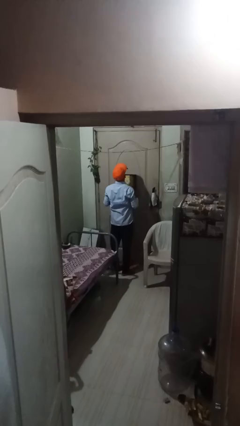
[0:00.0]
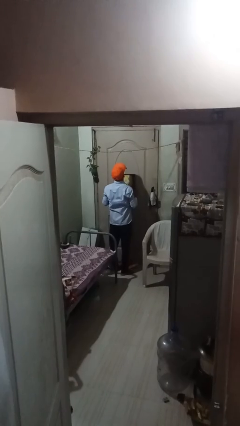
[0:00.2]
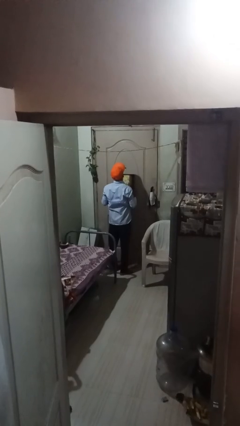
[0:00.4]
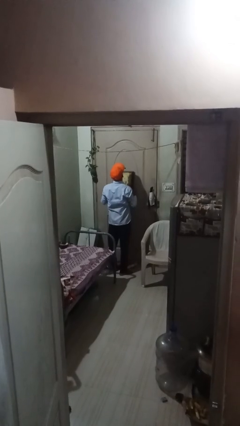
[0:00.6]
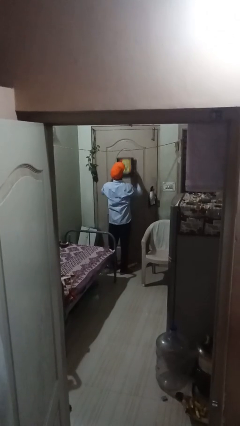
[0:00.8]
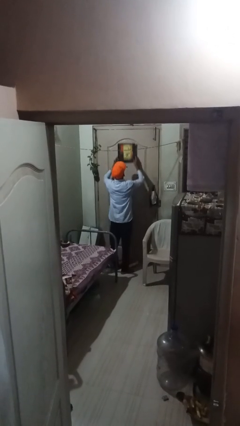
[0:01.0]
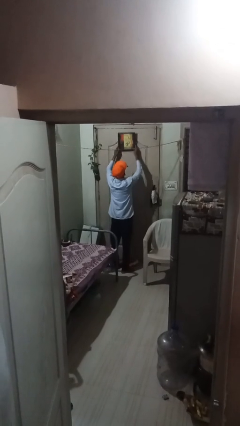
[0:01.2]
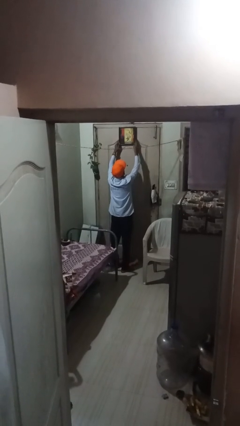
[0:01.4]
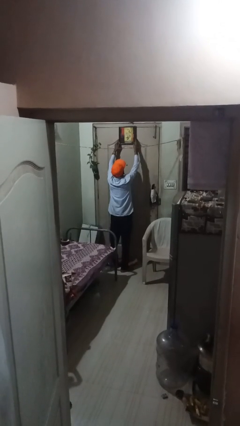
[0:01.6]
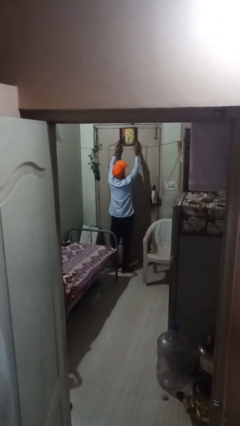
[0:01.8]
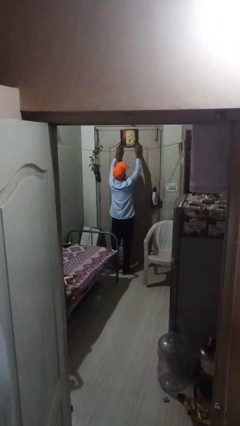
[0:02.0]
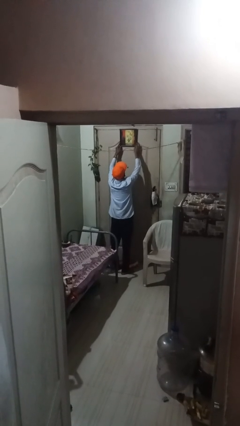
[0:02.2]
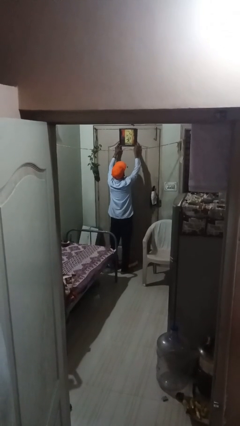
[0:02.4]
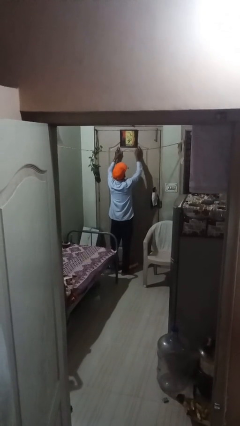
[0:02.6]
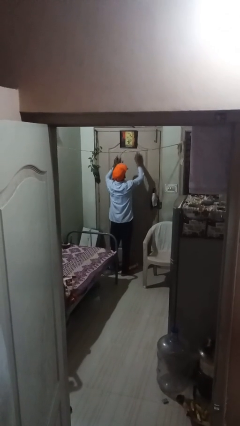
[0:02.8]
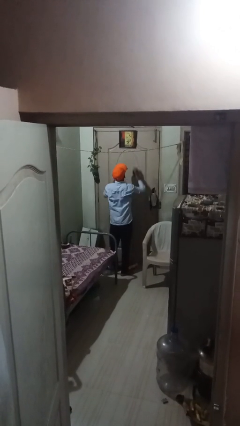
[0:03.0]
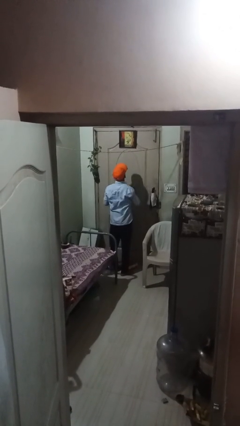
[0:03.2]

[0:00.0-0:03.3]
person puts up picture frame

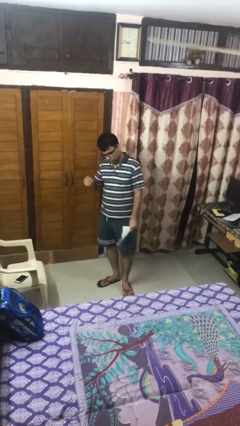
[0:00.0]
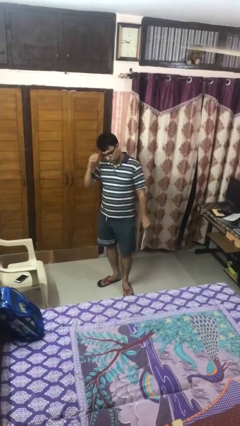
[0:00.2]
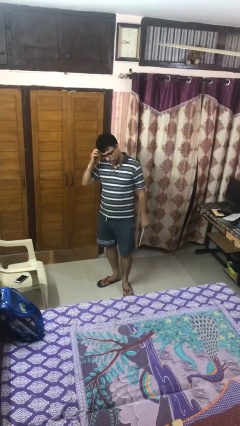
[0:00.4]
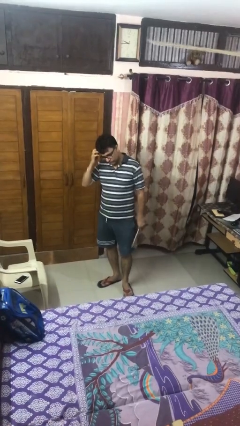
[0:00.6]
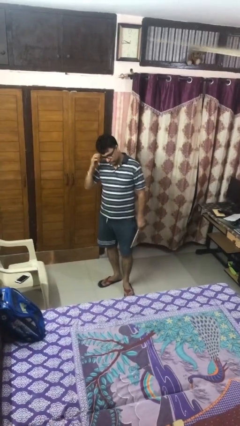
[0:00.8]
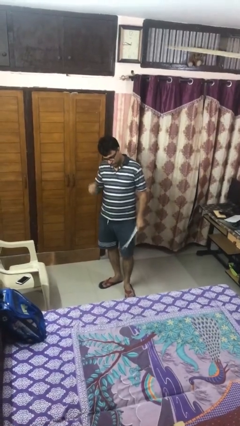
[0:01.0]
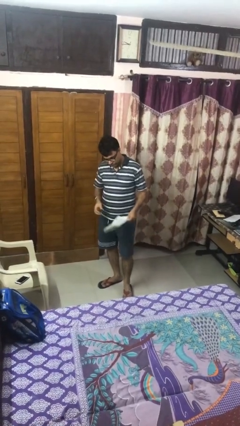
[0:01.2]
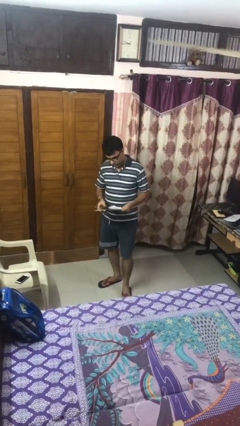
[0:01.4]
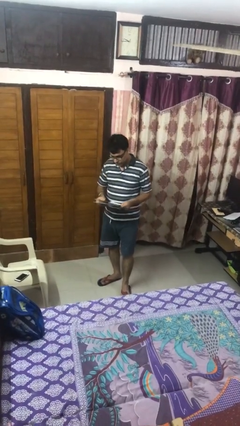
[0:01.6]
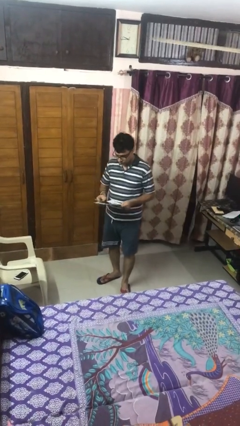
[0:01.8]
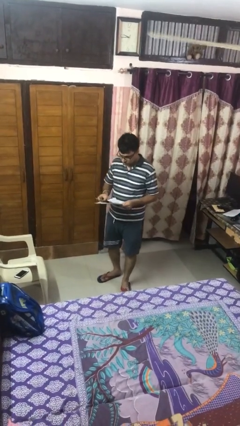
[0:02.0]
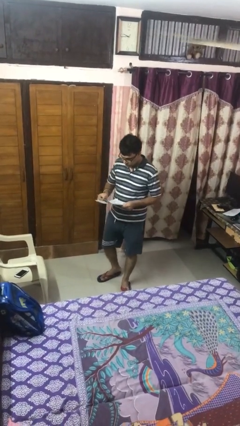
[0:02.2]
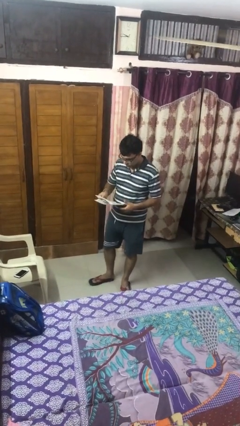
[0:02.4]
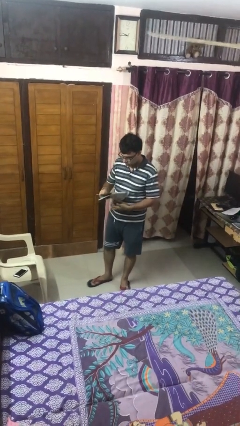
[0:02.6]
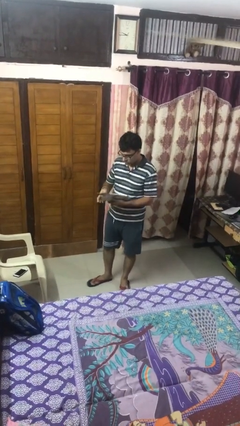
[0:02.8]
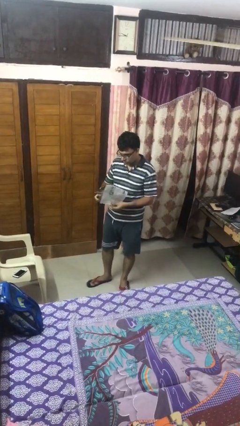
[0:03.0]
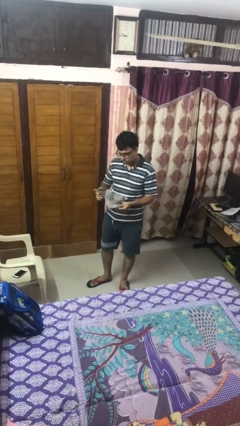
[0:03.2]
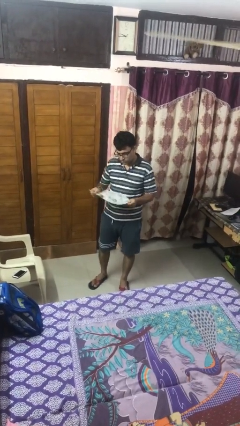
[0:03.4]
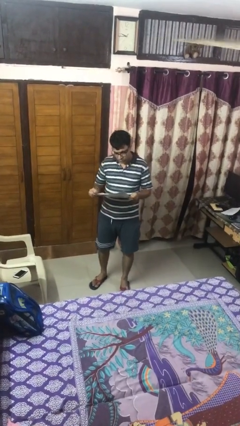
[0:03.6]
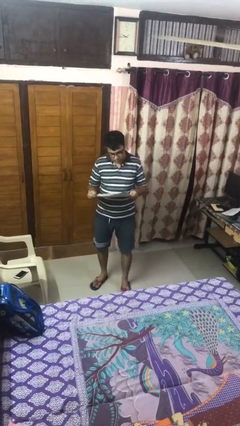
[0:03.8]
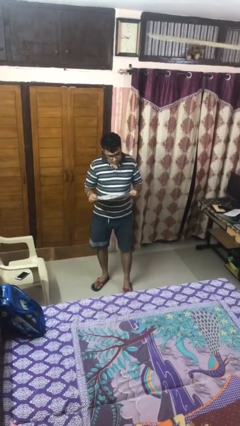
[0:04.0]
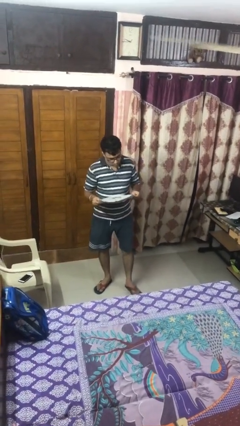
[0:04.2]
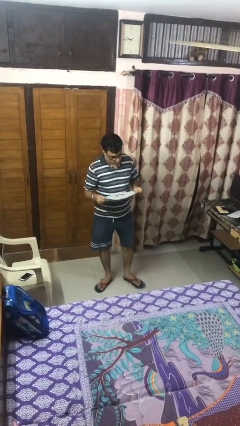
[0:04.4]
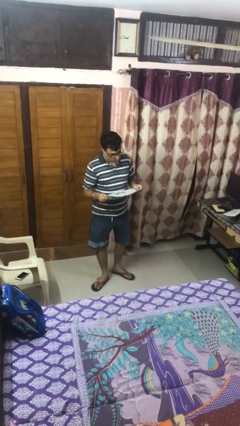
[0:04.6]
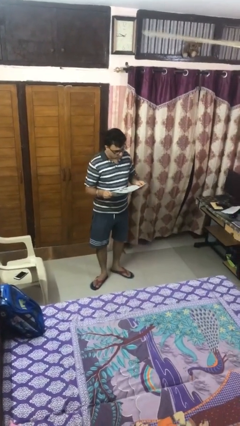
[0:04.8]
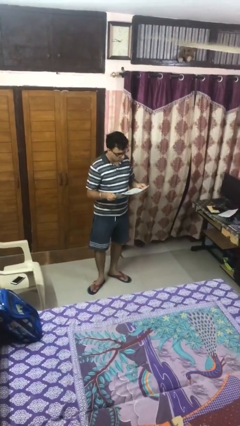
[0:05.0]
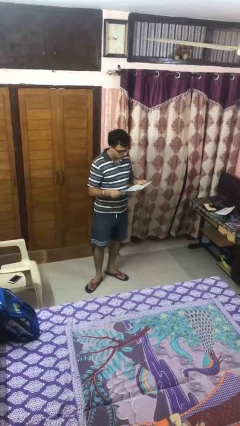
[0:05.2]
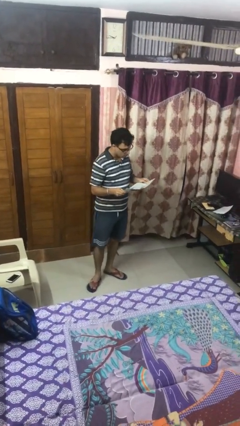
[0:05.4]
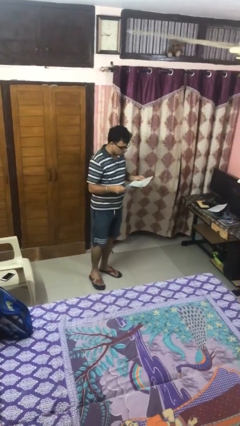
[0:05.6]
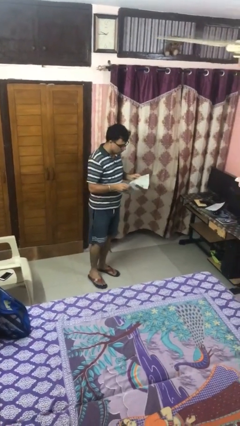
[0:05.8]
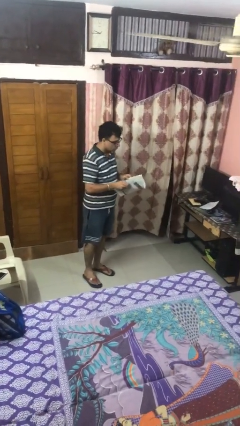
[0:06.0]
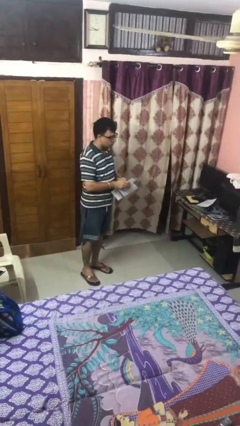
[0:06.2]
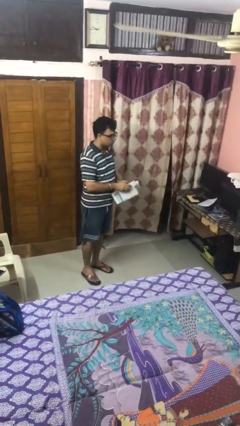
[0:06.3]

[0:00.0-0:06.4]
person reads newspaper

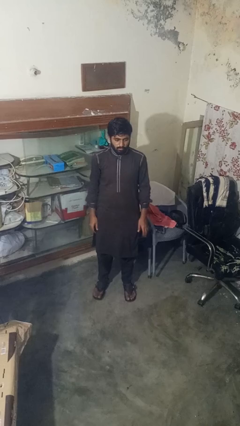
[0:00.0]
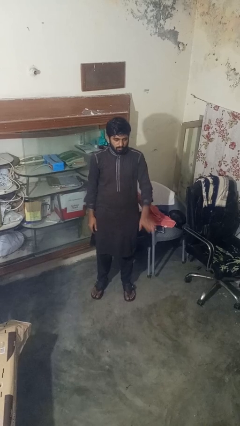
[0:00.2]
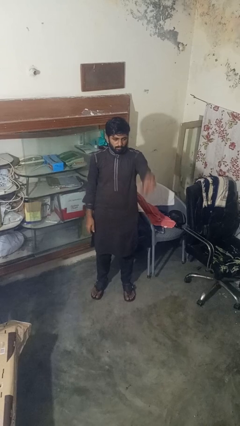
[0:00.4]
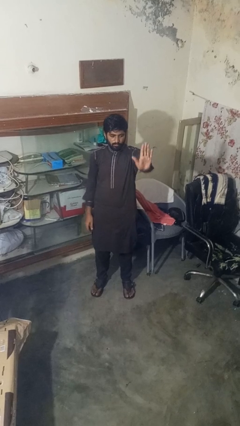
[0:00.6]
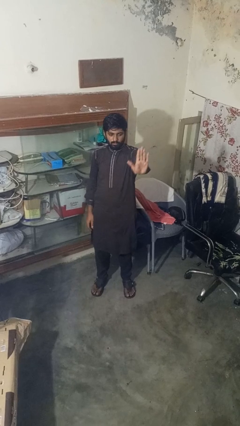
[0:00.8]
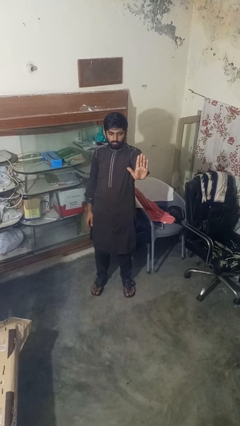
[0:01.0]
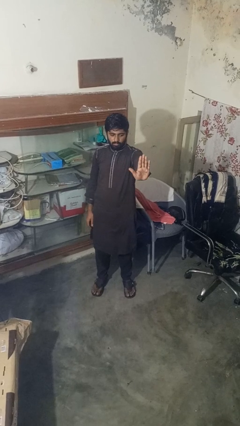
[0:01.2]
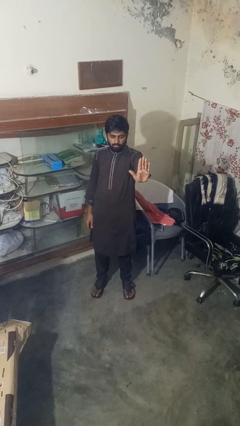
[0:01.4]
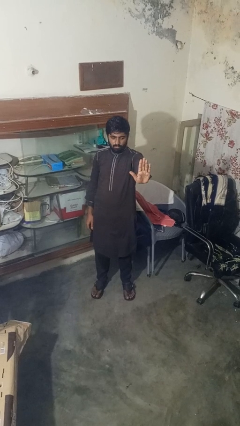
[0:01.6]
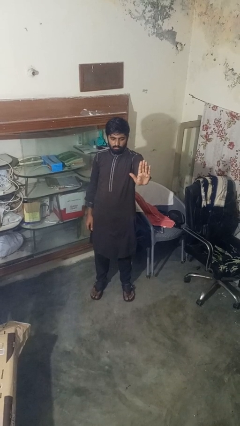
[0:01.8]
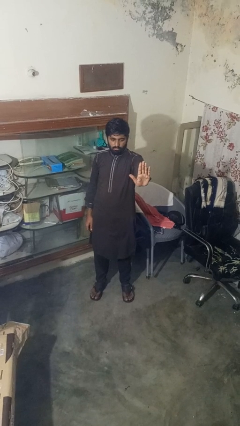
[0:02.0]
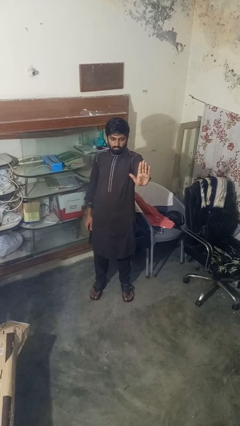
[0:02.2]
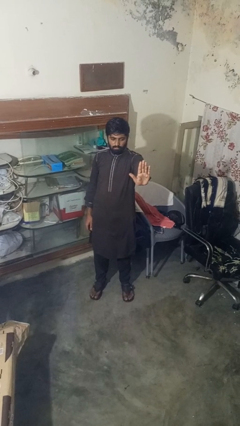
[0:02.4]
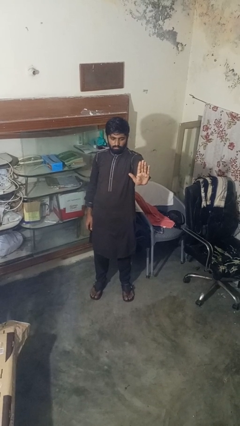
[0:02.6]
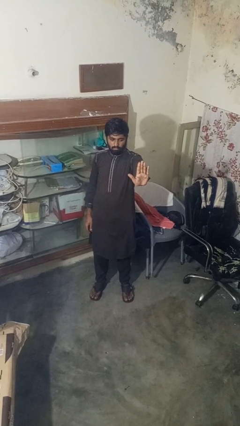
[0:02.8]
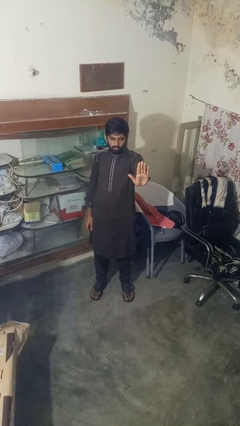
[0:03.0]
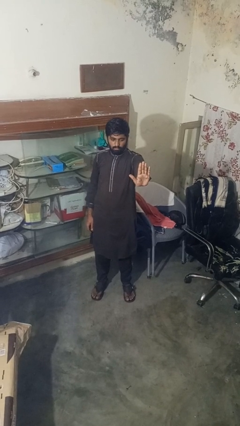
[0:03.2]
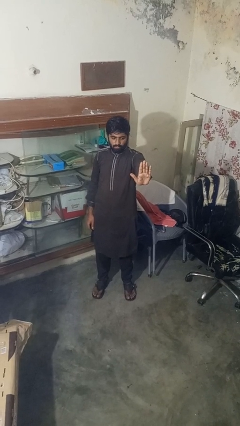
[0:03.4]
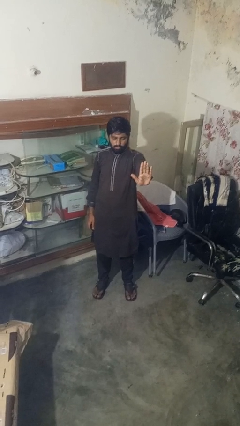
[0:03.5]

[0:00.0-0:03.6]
person gestures stop

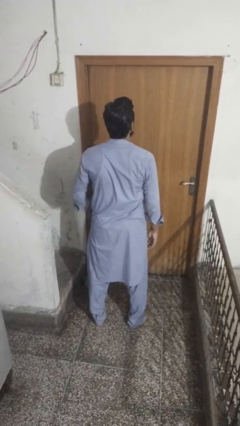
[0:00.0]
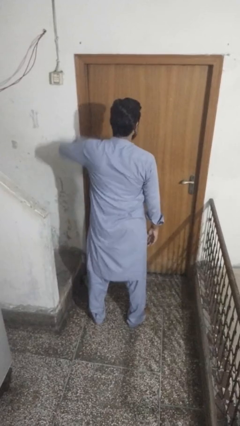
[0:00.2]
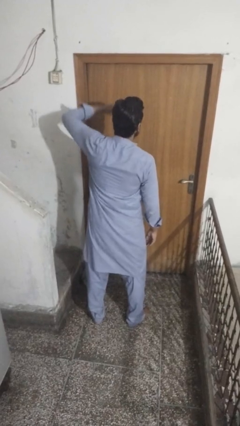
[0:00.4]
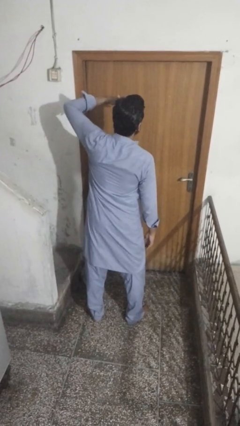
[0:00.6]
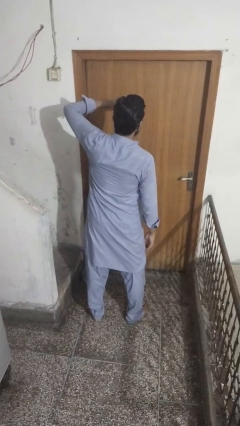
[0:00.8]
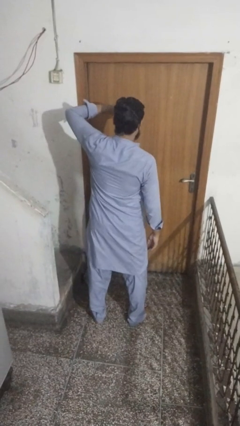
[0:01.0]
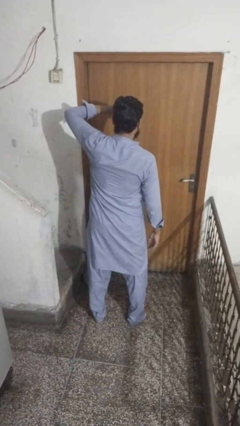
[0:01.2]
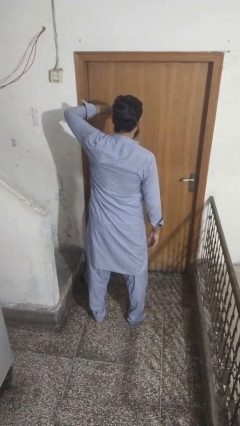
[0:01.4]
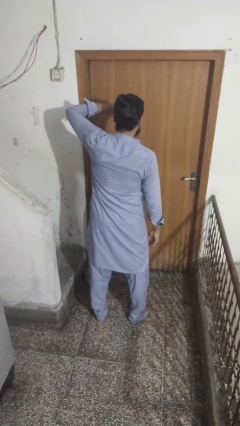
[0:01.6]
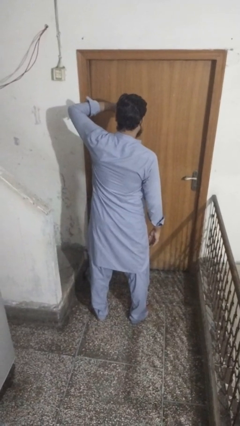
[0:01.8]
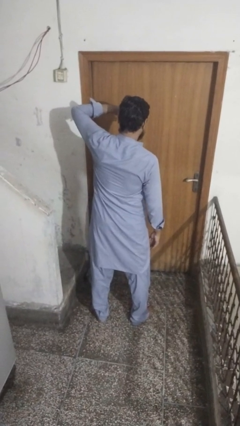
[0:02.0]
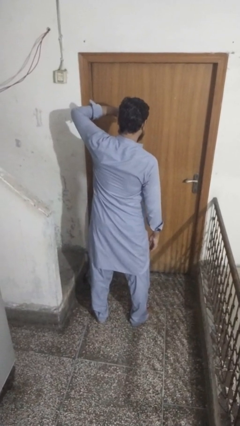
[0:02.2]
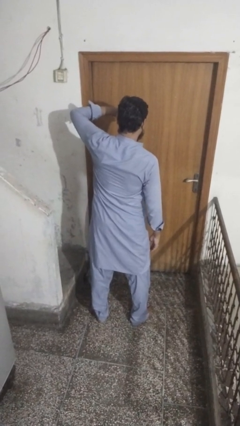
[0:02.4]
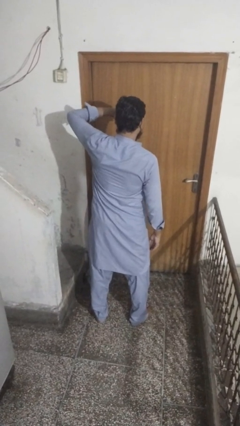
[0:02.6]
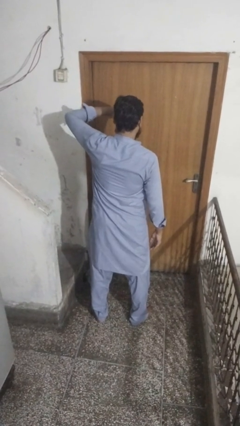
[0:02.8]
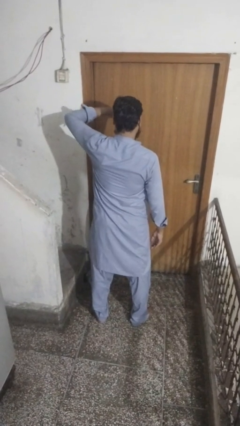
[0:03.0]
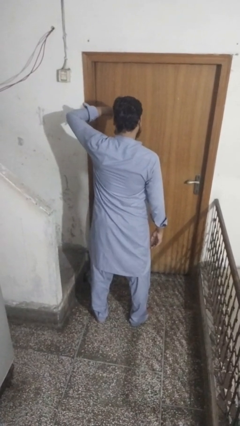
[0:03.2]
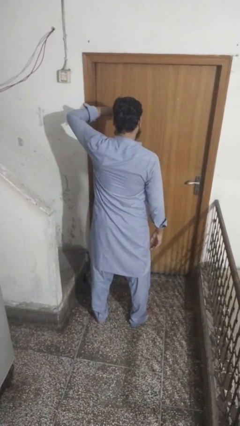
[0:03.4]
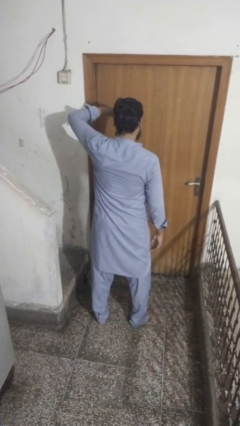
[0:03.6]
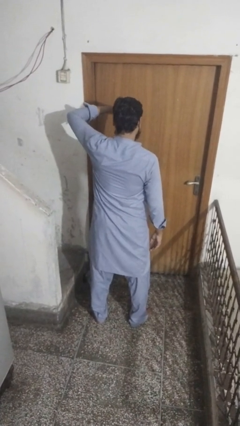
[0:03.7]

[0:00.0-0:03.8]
person shades eyes

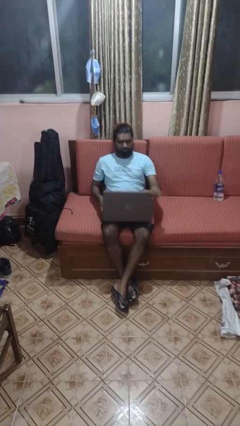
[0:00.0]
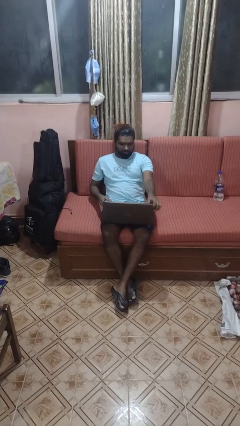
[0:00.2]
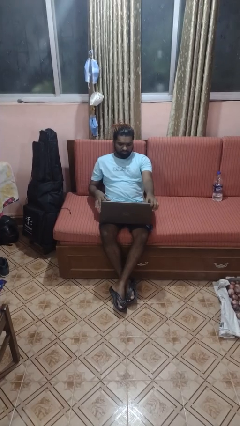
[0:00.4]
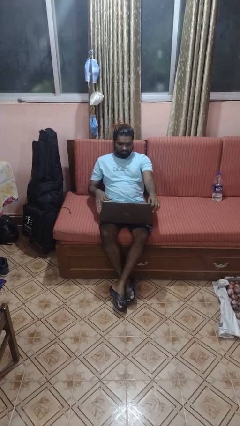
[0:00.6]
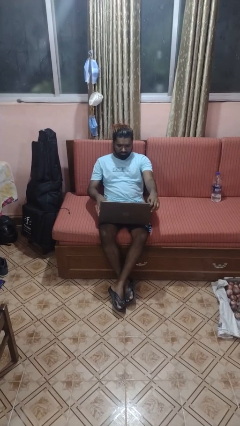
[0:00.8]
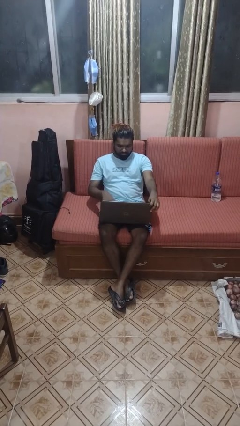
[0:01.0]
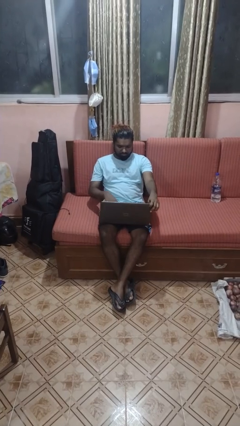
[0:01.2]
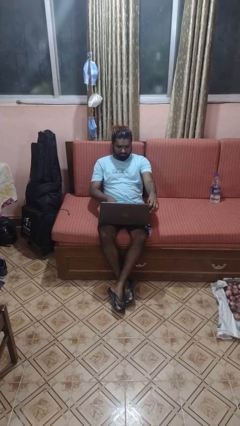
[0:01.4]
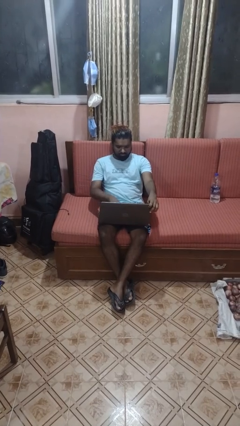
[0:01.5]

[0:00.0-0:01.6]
person opens laptop
